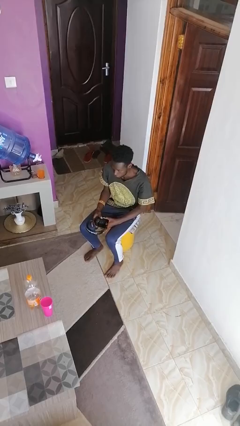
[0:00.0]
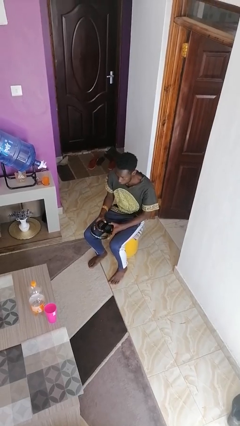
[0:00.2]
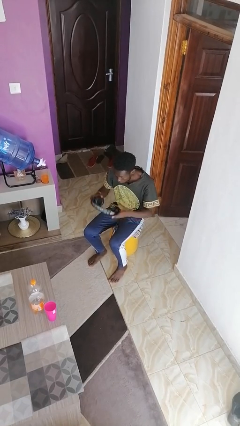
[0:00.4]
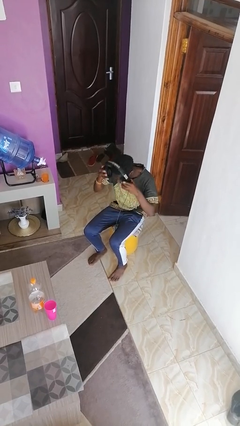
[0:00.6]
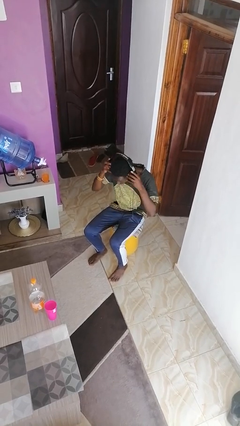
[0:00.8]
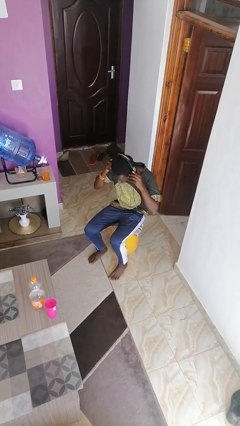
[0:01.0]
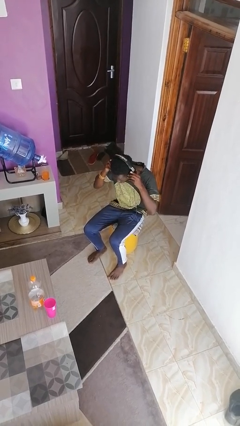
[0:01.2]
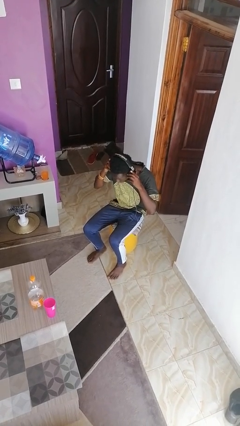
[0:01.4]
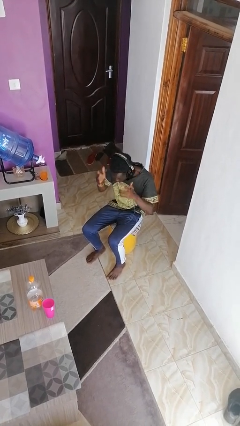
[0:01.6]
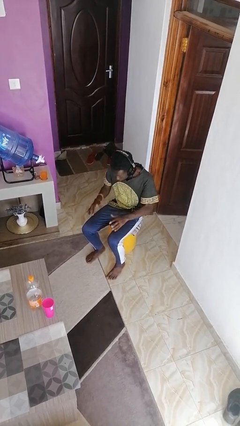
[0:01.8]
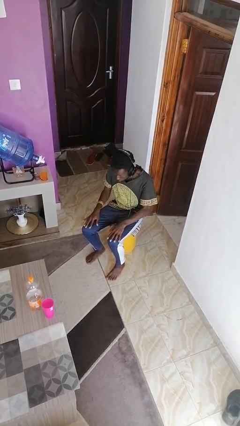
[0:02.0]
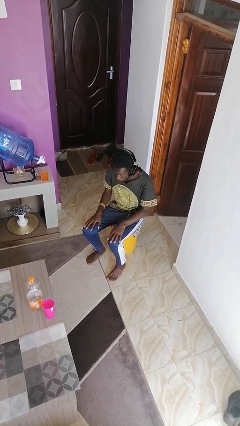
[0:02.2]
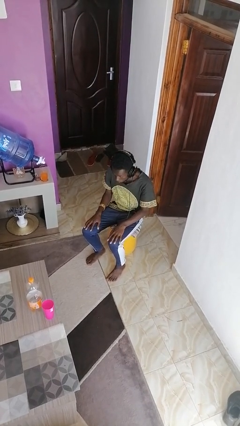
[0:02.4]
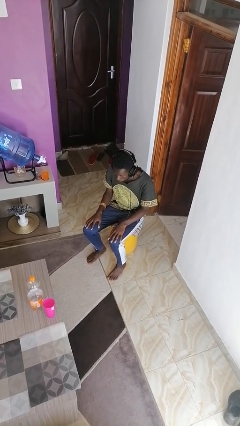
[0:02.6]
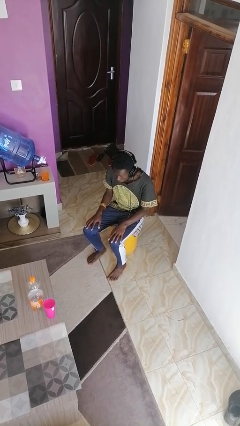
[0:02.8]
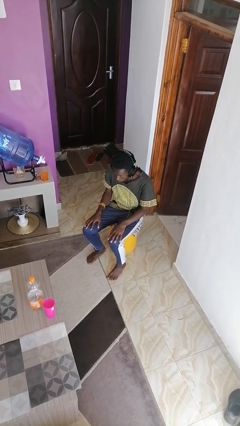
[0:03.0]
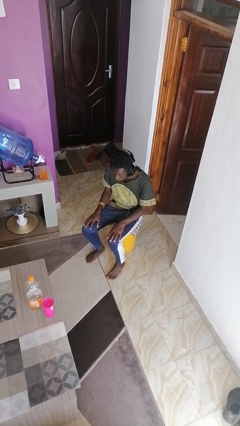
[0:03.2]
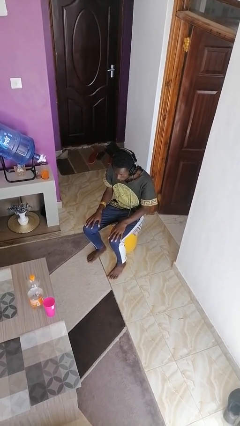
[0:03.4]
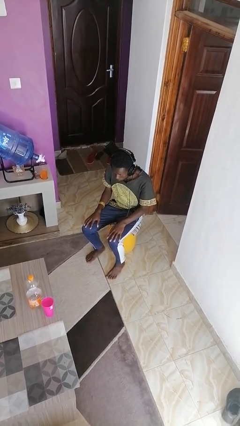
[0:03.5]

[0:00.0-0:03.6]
person puts on headphones

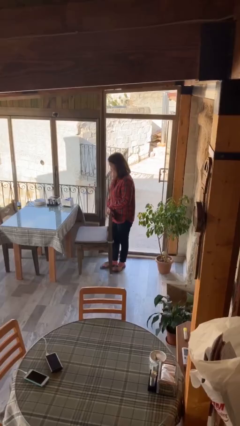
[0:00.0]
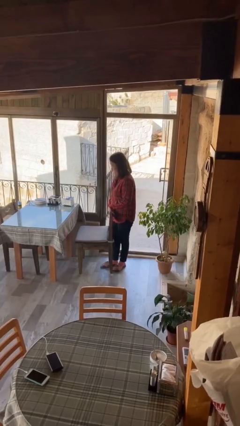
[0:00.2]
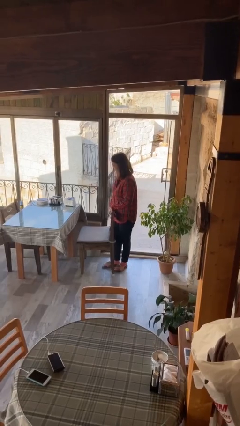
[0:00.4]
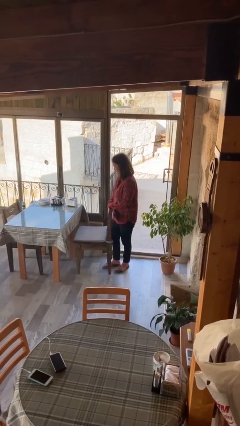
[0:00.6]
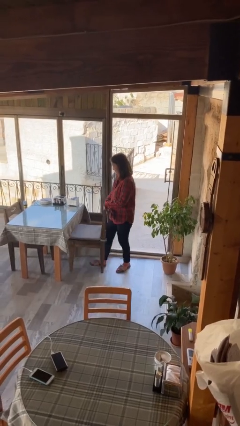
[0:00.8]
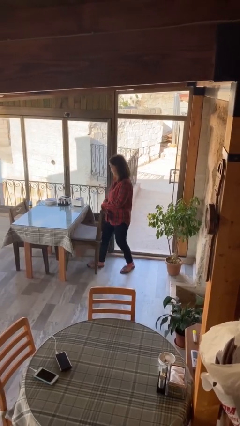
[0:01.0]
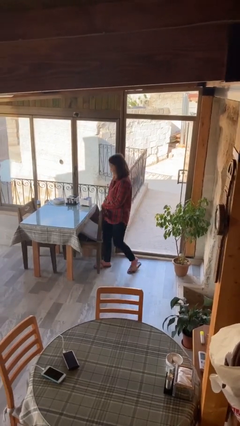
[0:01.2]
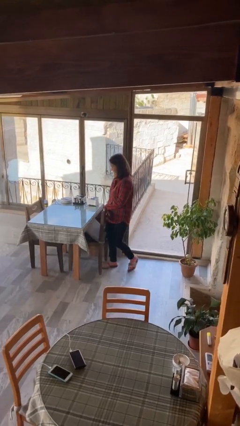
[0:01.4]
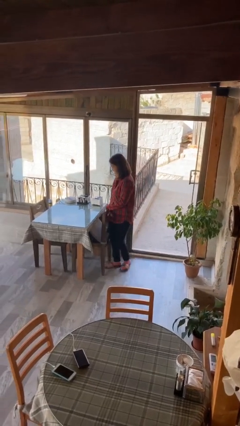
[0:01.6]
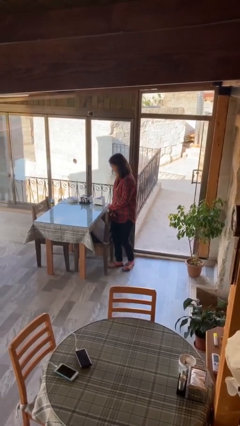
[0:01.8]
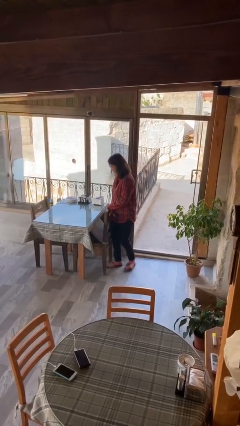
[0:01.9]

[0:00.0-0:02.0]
person pushes in chair

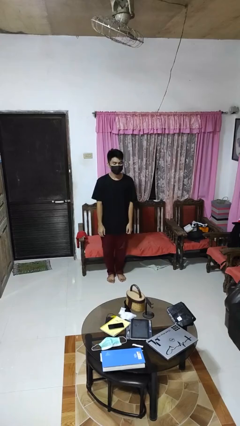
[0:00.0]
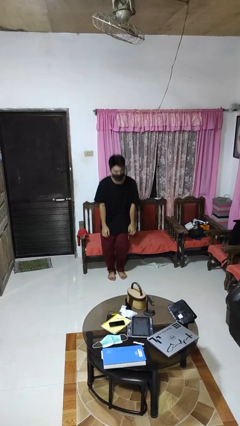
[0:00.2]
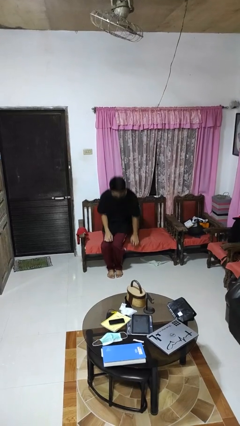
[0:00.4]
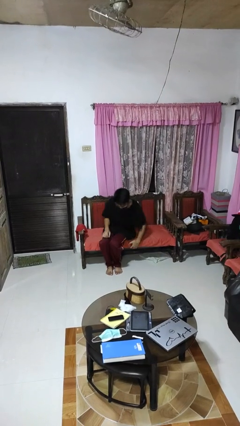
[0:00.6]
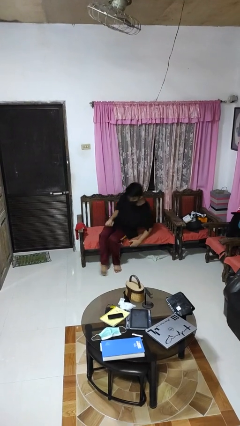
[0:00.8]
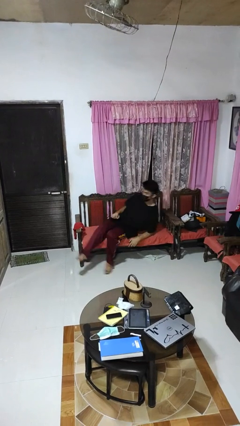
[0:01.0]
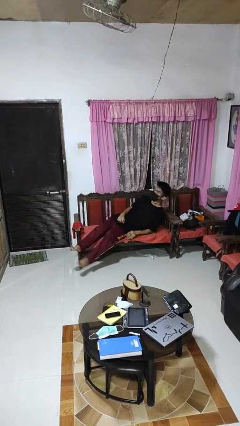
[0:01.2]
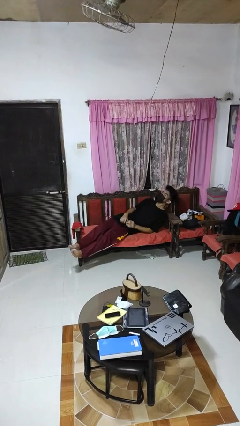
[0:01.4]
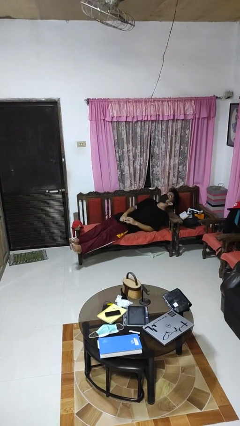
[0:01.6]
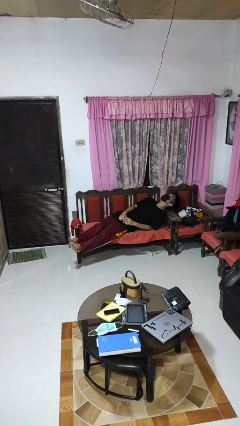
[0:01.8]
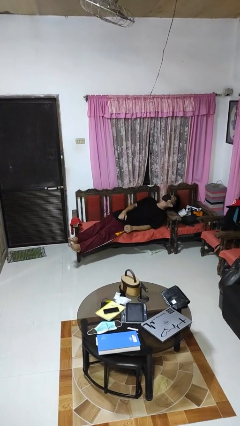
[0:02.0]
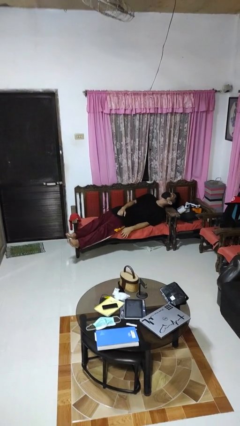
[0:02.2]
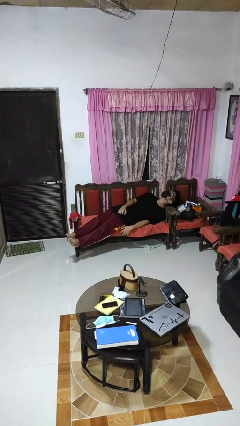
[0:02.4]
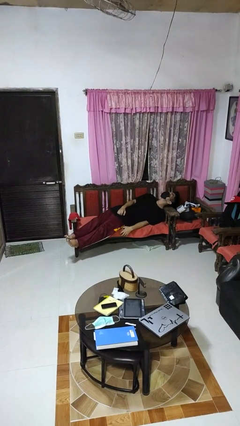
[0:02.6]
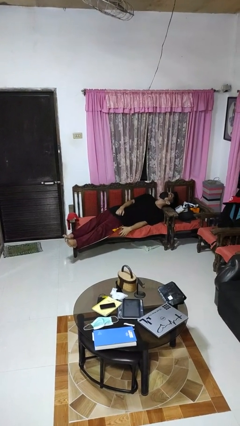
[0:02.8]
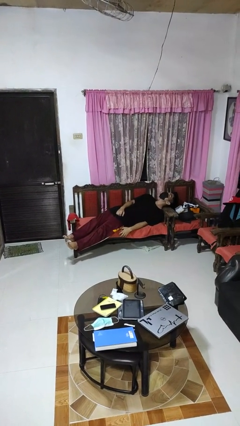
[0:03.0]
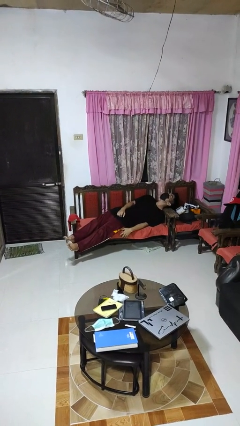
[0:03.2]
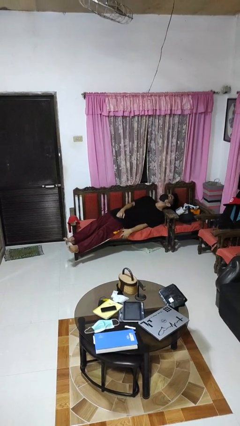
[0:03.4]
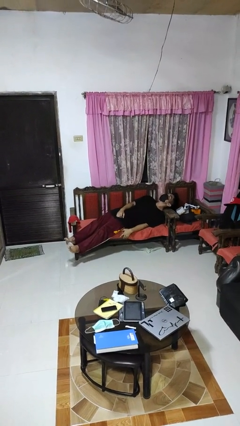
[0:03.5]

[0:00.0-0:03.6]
person lies down on couch

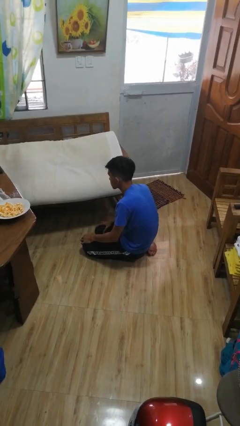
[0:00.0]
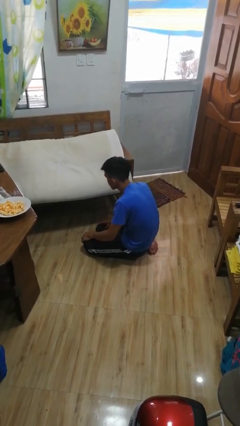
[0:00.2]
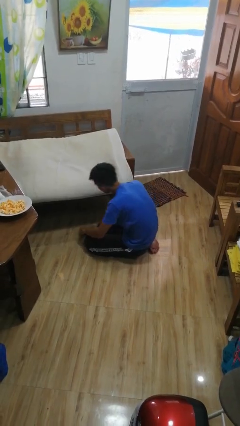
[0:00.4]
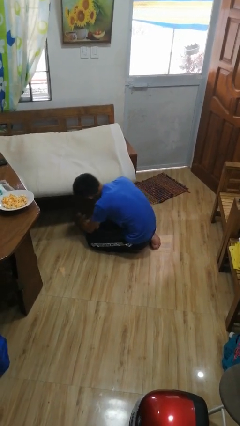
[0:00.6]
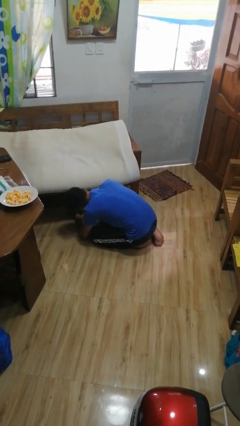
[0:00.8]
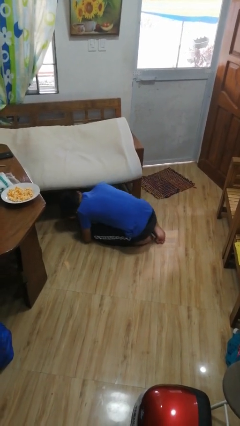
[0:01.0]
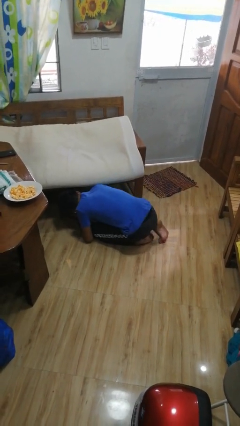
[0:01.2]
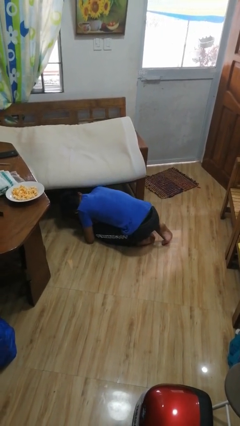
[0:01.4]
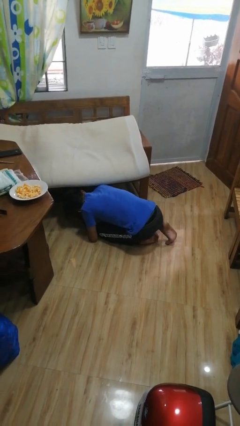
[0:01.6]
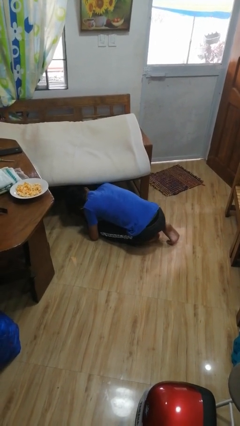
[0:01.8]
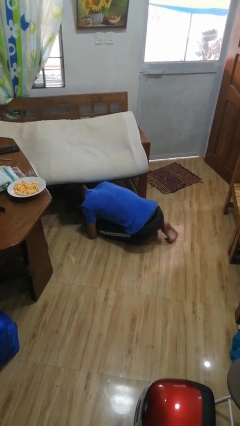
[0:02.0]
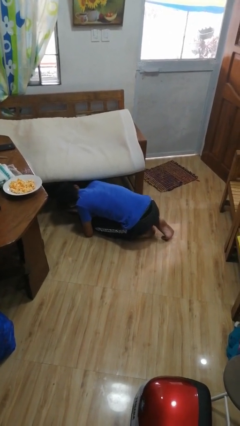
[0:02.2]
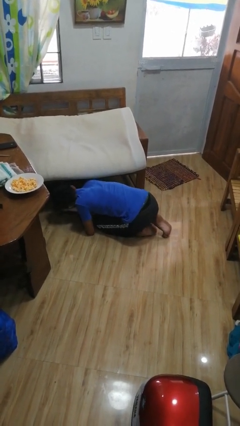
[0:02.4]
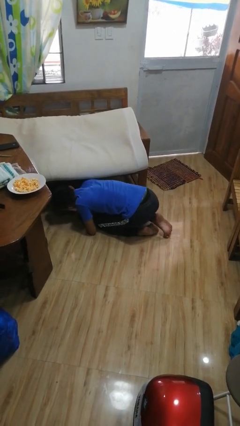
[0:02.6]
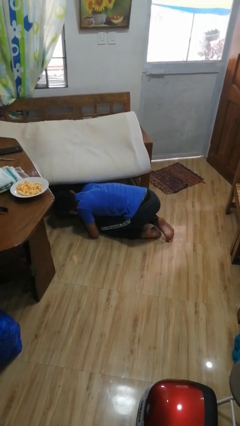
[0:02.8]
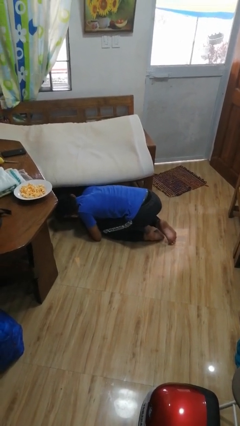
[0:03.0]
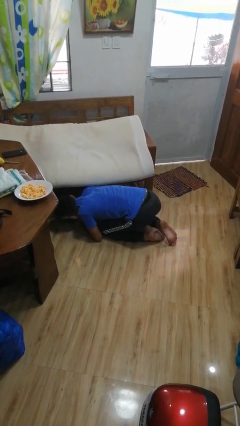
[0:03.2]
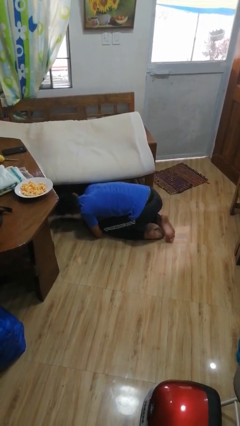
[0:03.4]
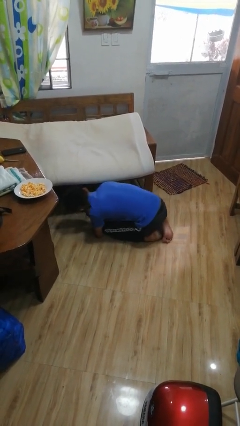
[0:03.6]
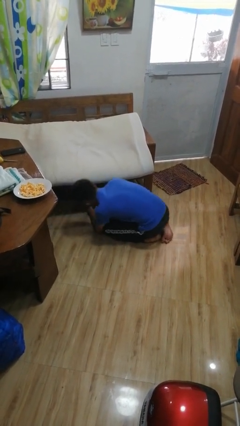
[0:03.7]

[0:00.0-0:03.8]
person searches under couch

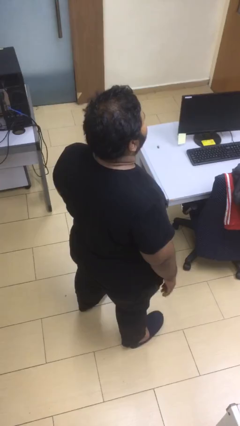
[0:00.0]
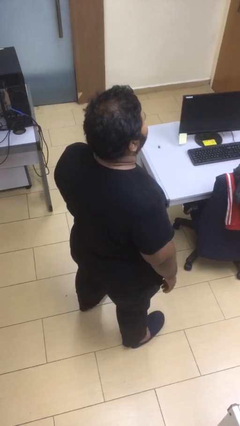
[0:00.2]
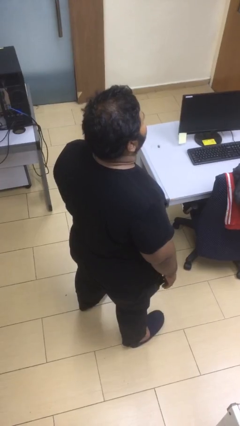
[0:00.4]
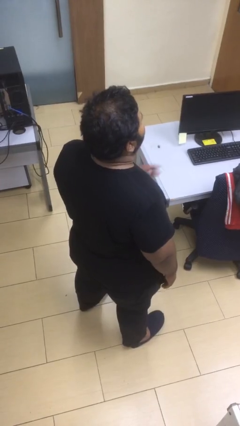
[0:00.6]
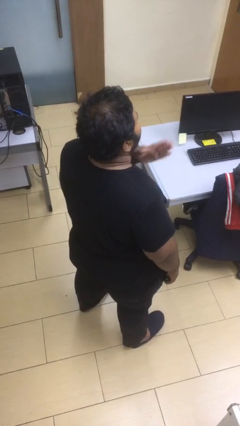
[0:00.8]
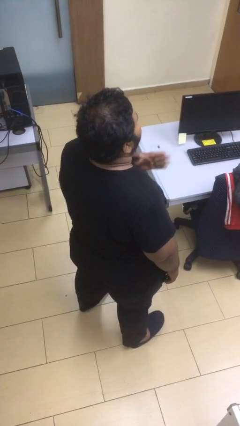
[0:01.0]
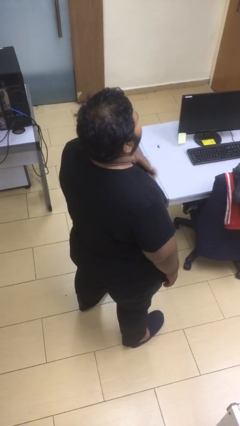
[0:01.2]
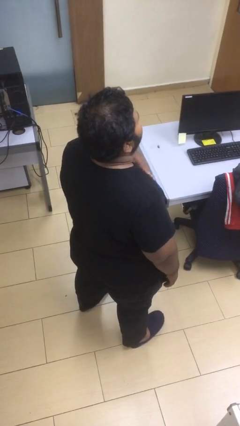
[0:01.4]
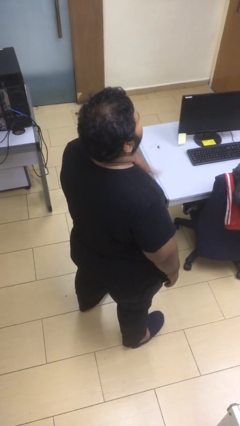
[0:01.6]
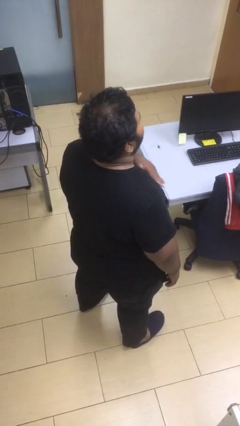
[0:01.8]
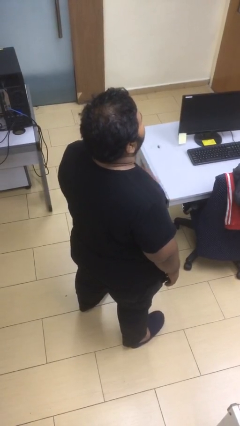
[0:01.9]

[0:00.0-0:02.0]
person drums on chest

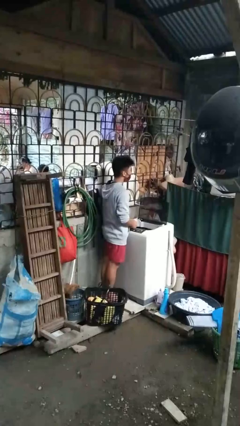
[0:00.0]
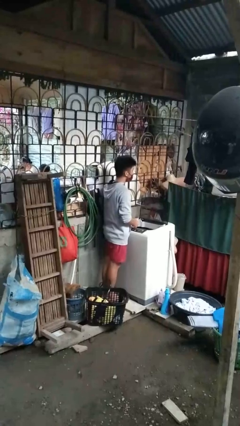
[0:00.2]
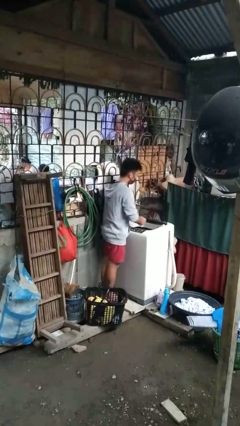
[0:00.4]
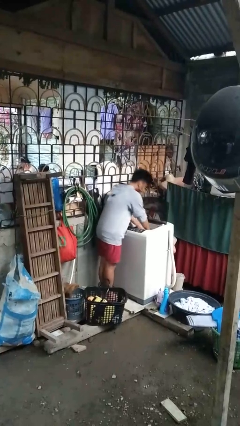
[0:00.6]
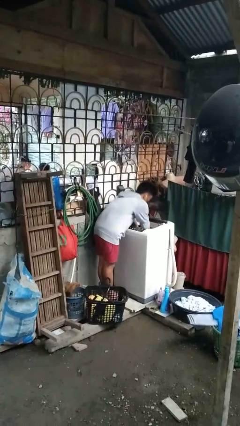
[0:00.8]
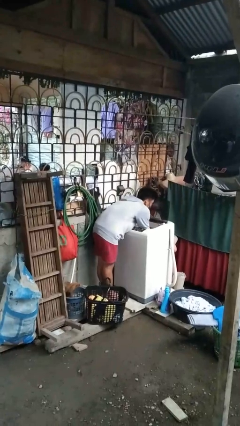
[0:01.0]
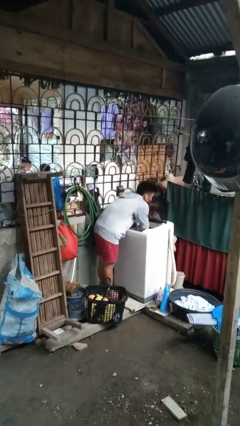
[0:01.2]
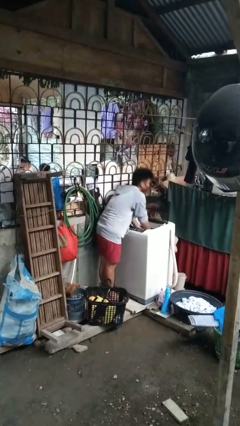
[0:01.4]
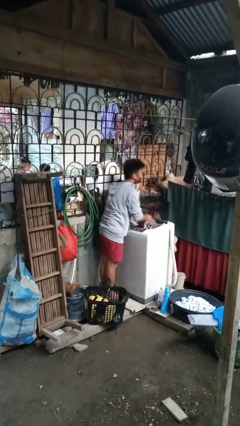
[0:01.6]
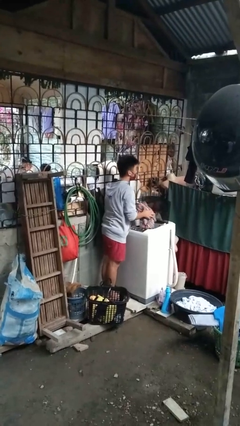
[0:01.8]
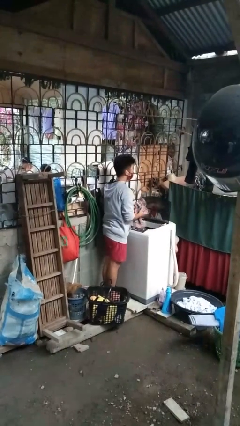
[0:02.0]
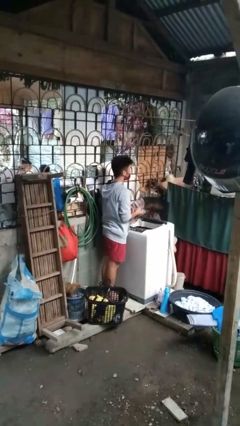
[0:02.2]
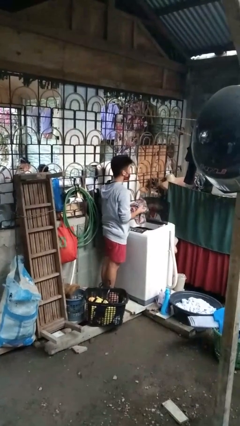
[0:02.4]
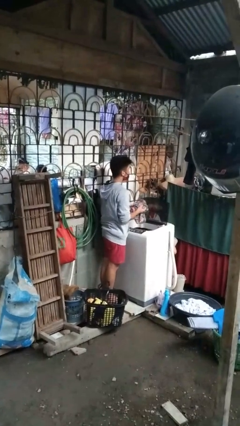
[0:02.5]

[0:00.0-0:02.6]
person unloads clotheswasher
